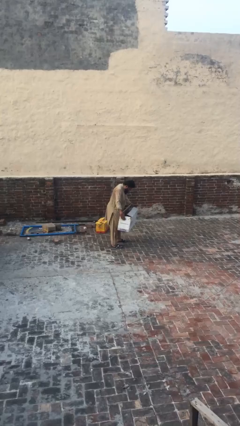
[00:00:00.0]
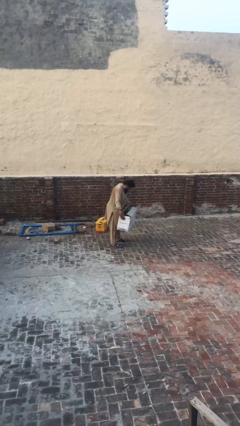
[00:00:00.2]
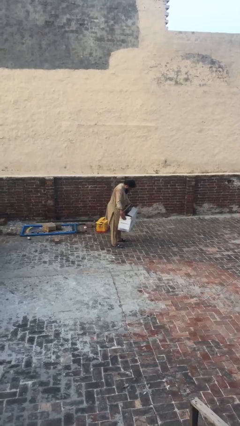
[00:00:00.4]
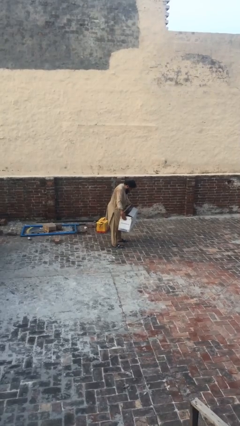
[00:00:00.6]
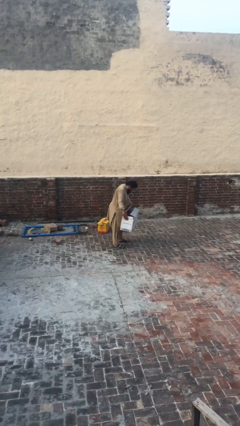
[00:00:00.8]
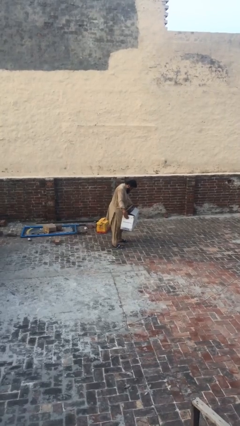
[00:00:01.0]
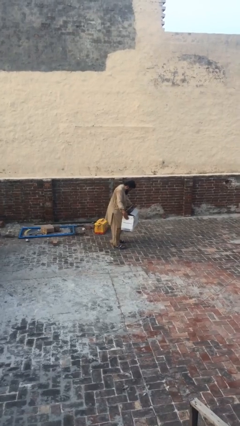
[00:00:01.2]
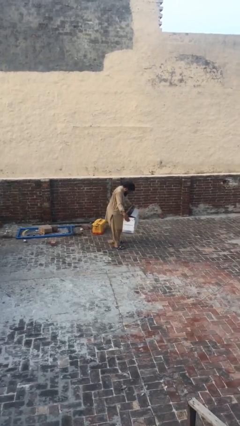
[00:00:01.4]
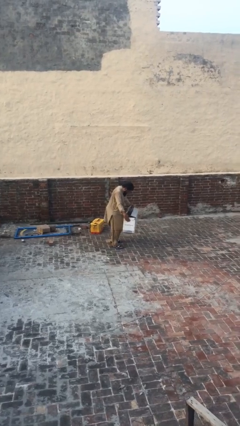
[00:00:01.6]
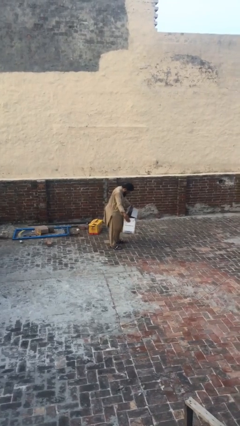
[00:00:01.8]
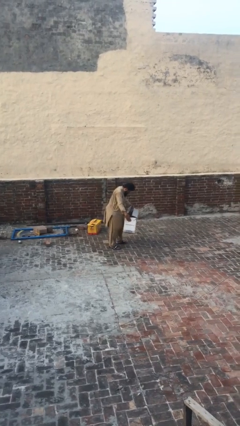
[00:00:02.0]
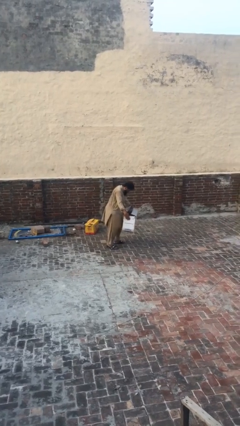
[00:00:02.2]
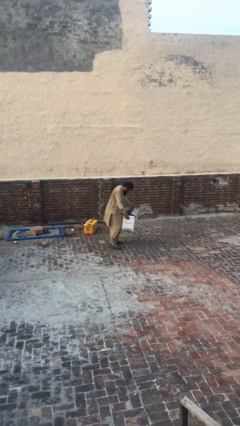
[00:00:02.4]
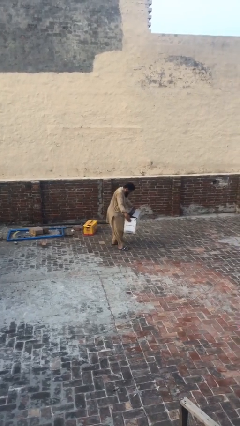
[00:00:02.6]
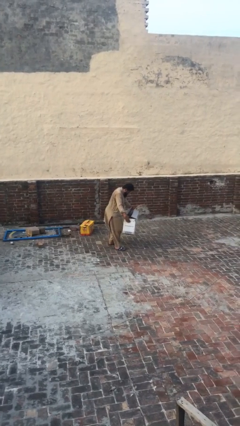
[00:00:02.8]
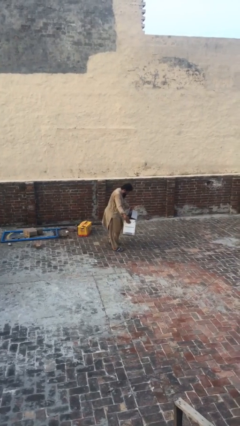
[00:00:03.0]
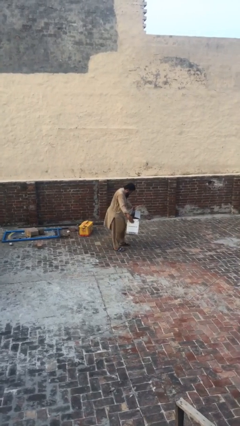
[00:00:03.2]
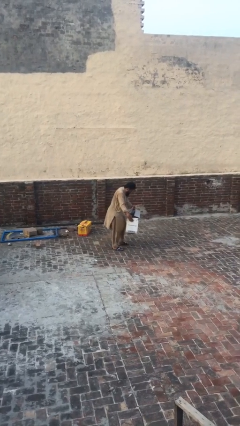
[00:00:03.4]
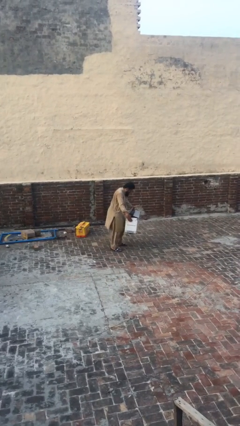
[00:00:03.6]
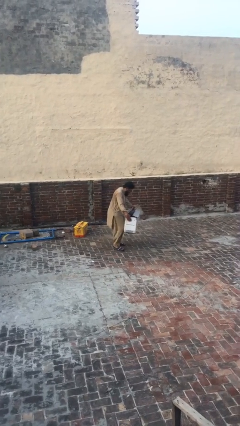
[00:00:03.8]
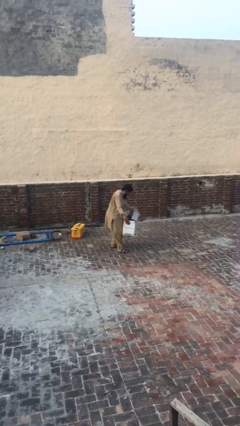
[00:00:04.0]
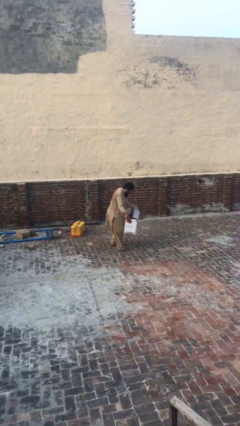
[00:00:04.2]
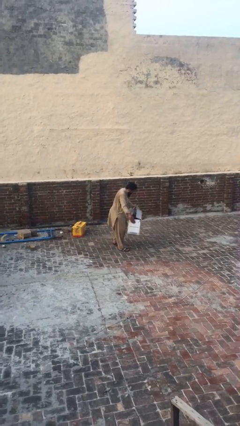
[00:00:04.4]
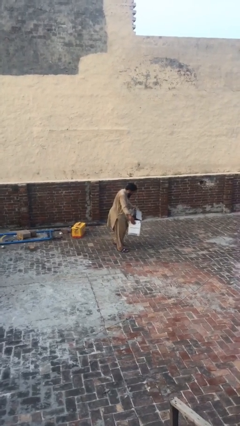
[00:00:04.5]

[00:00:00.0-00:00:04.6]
person carries heavy object

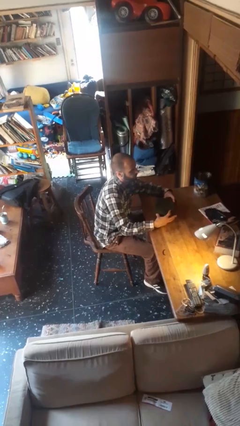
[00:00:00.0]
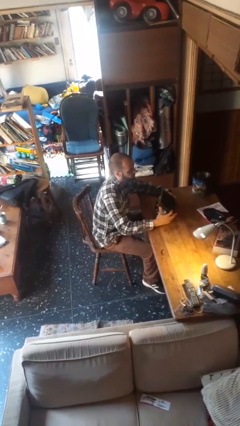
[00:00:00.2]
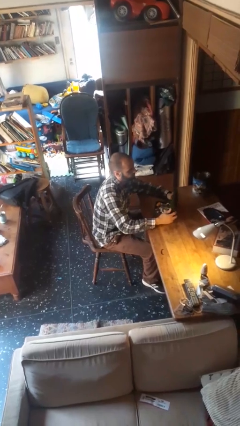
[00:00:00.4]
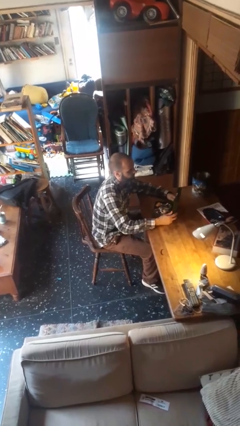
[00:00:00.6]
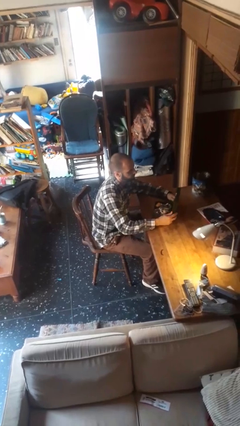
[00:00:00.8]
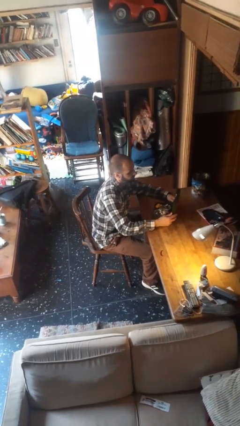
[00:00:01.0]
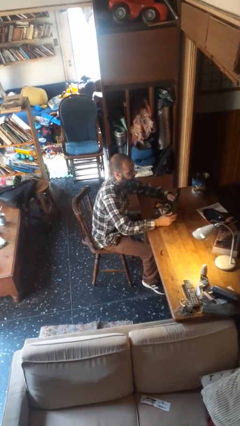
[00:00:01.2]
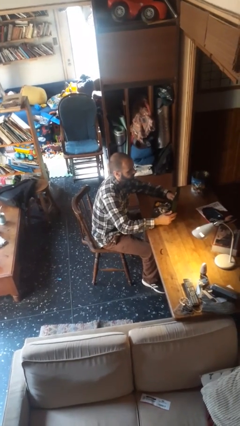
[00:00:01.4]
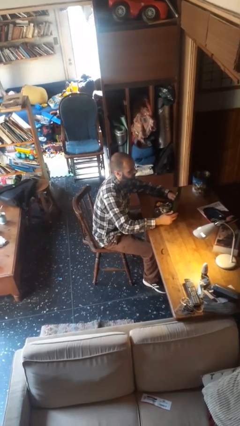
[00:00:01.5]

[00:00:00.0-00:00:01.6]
person opens jewelry box

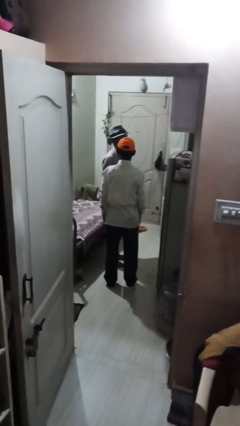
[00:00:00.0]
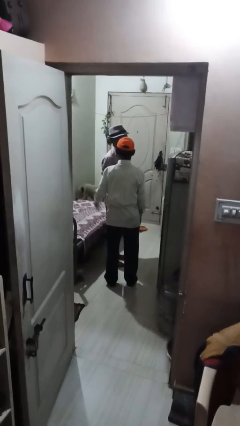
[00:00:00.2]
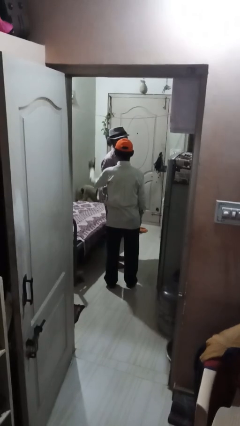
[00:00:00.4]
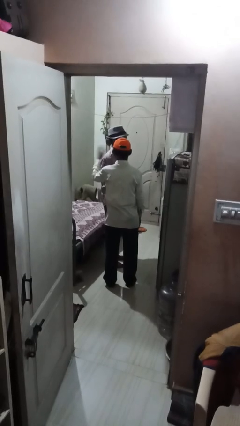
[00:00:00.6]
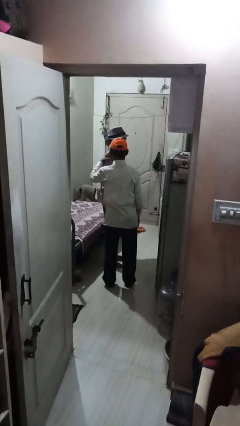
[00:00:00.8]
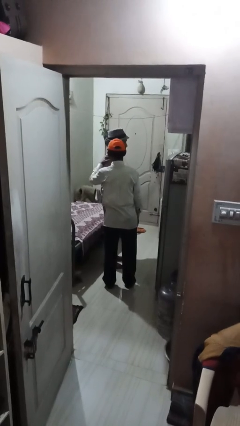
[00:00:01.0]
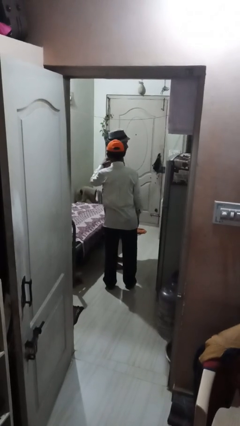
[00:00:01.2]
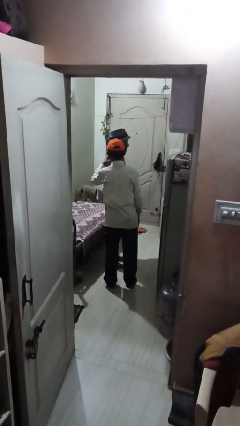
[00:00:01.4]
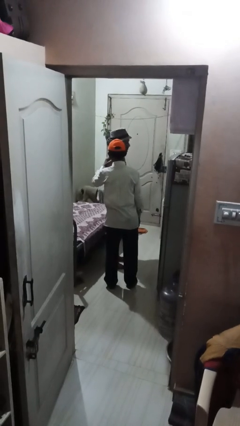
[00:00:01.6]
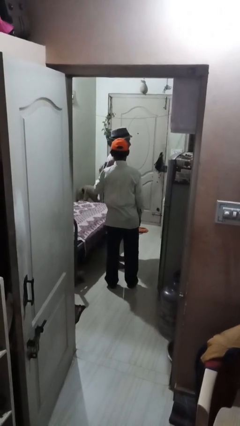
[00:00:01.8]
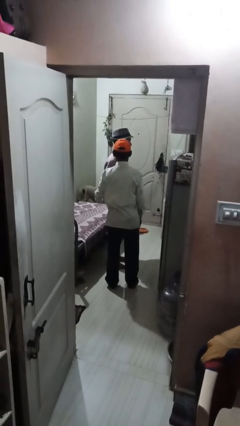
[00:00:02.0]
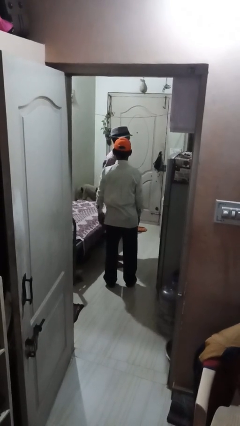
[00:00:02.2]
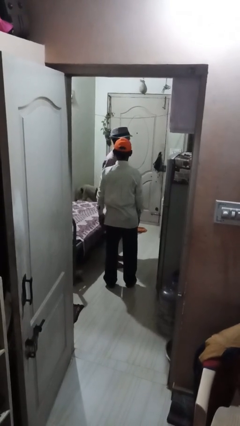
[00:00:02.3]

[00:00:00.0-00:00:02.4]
person pounds shoulders of person

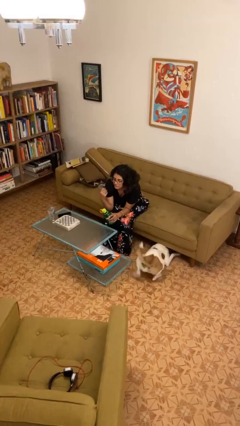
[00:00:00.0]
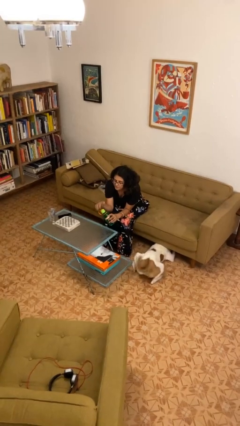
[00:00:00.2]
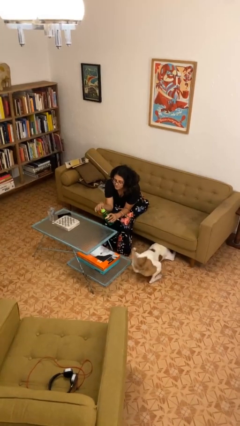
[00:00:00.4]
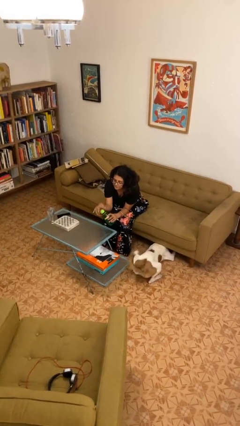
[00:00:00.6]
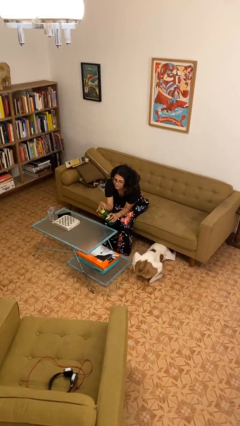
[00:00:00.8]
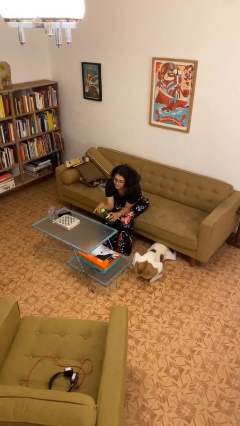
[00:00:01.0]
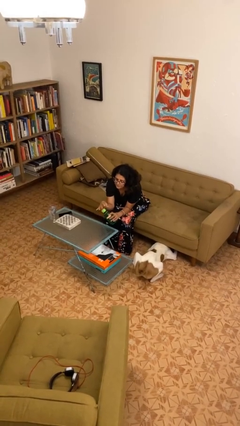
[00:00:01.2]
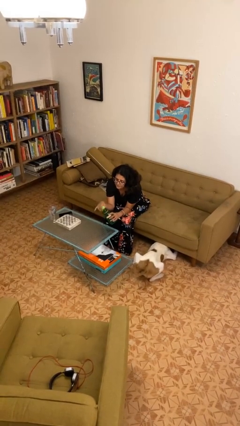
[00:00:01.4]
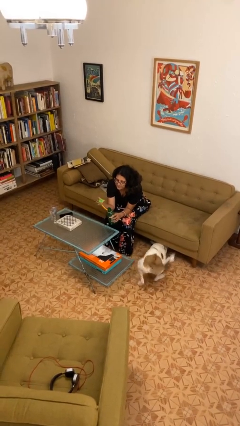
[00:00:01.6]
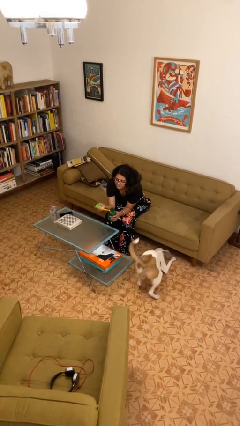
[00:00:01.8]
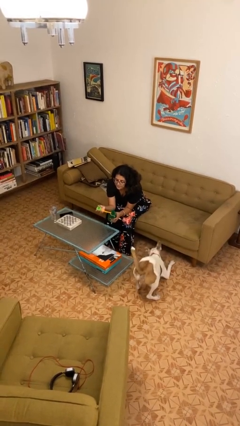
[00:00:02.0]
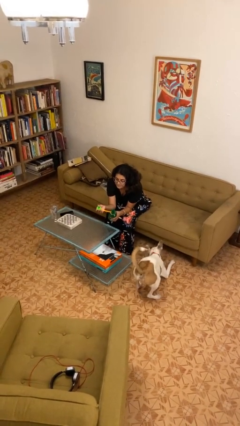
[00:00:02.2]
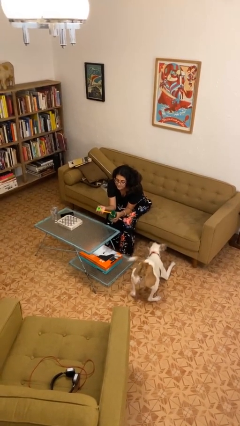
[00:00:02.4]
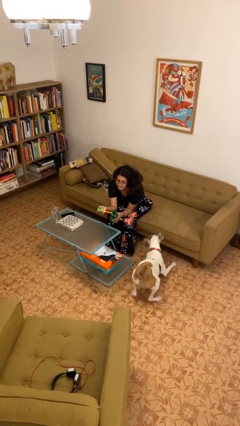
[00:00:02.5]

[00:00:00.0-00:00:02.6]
person unscrews lid from bottle

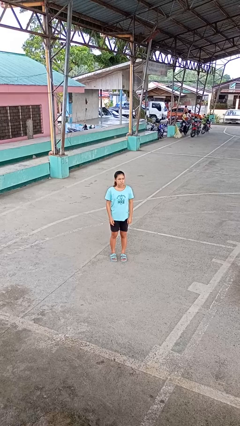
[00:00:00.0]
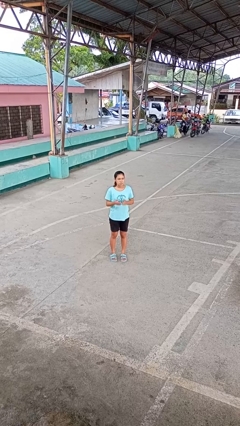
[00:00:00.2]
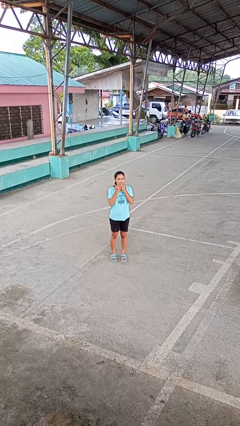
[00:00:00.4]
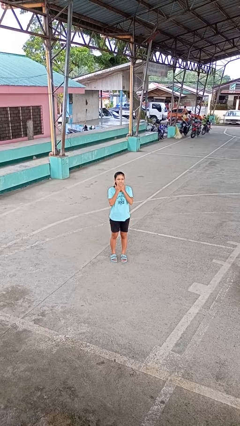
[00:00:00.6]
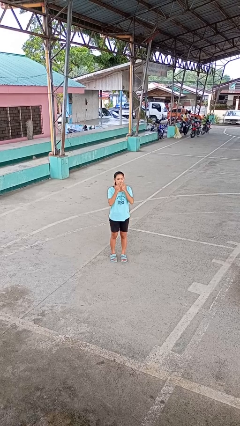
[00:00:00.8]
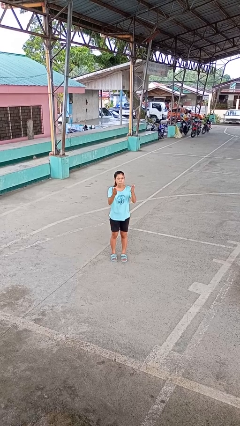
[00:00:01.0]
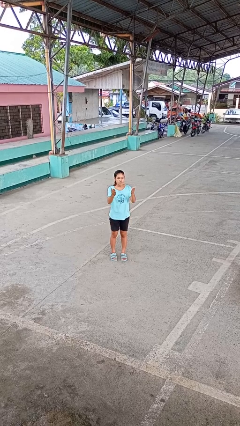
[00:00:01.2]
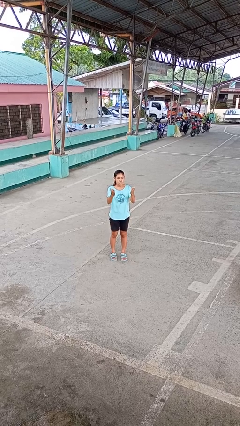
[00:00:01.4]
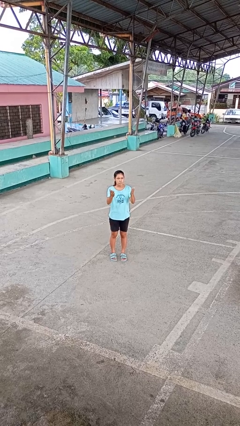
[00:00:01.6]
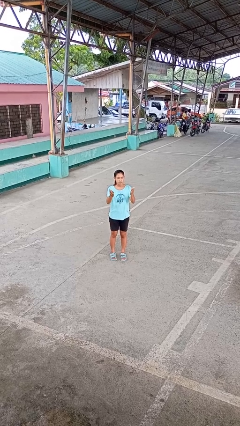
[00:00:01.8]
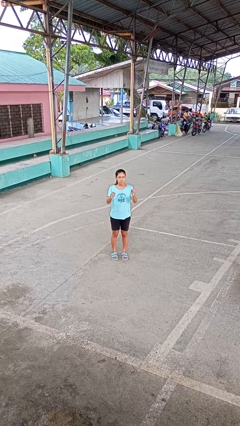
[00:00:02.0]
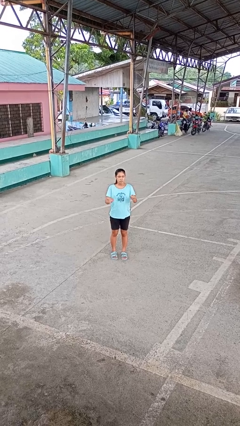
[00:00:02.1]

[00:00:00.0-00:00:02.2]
person gestures blow kiss

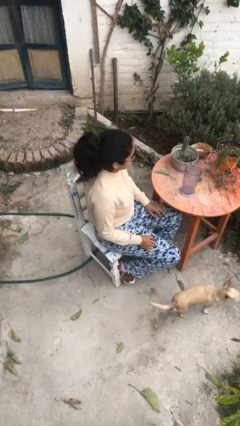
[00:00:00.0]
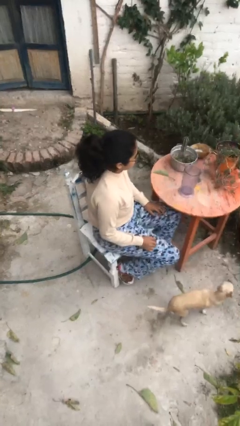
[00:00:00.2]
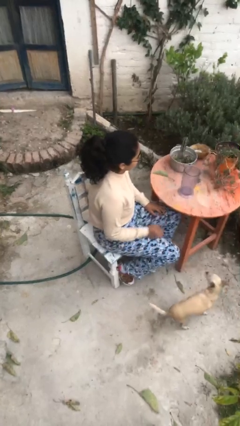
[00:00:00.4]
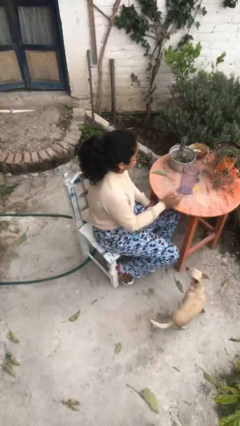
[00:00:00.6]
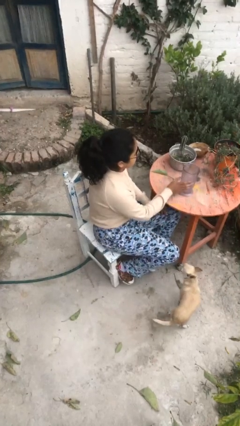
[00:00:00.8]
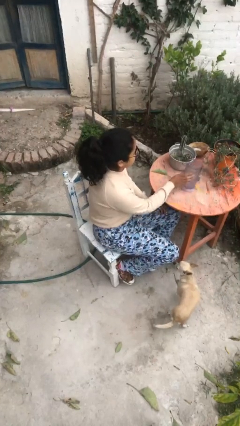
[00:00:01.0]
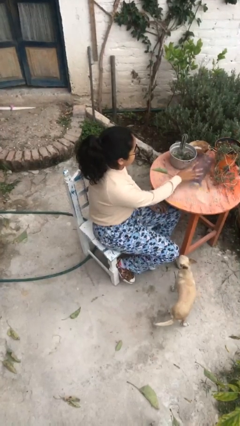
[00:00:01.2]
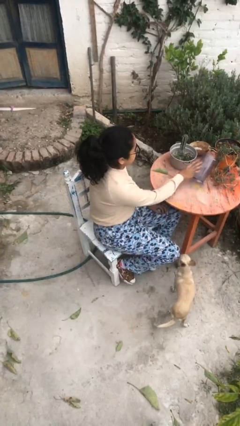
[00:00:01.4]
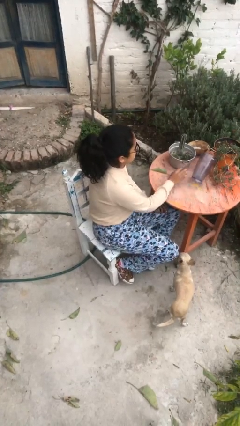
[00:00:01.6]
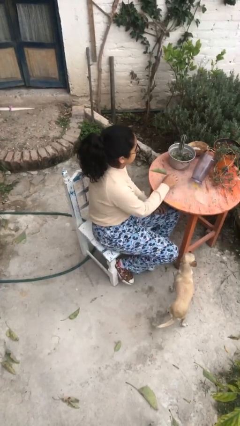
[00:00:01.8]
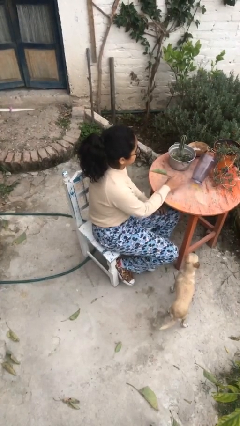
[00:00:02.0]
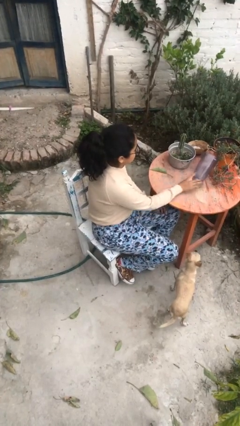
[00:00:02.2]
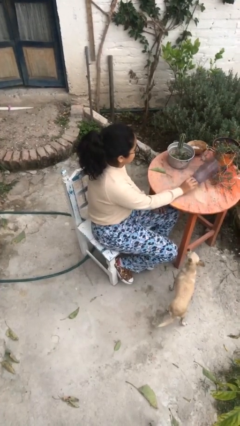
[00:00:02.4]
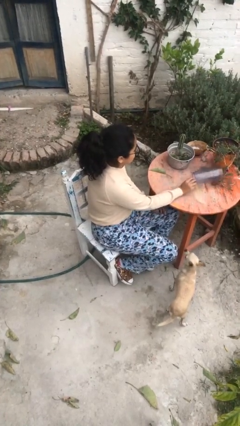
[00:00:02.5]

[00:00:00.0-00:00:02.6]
person knocks over glass

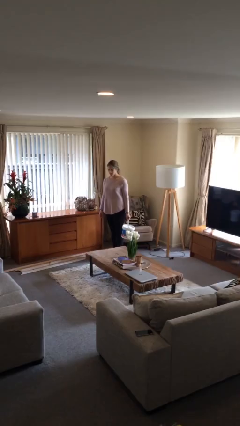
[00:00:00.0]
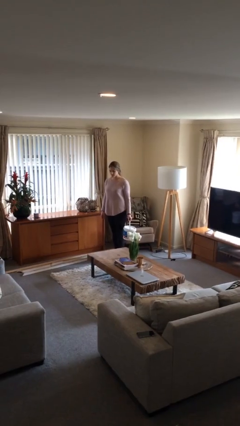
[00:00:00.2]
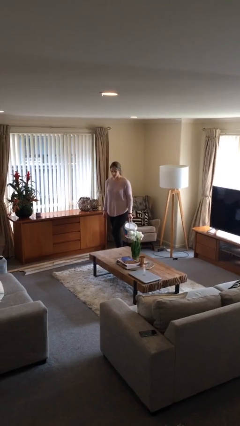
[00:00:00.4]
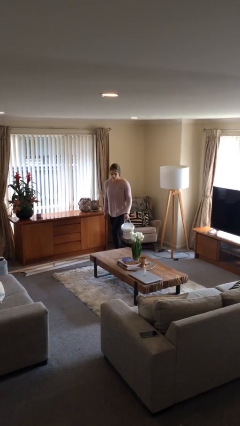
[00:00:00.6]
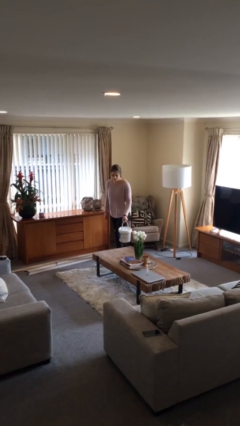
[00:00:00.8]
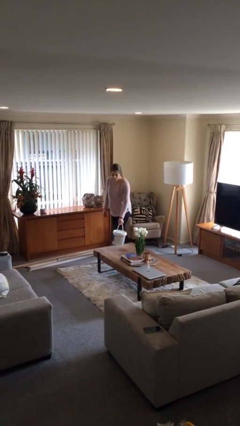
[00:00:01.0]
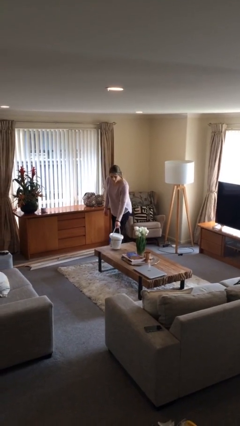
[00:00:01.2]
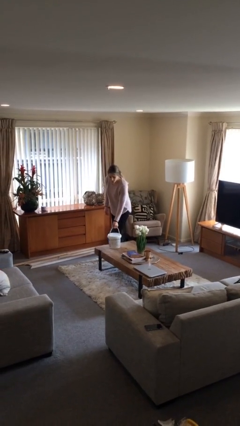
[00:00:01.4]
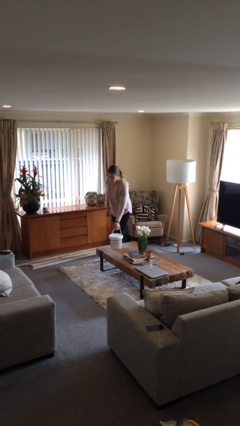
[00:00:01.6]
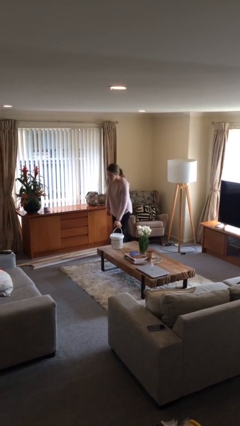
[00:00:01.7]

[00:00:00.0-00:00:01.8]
person puts down object on table
